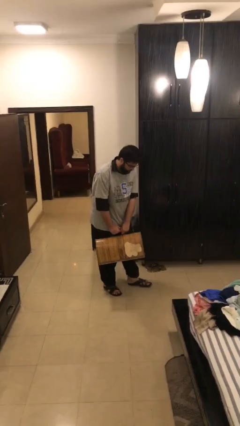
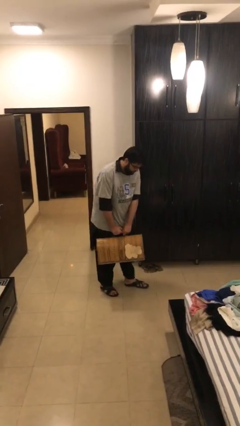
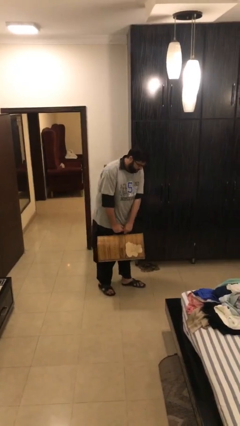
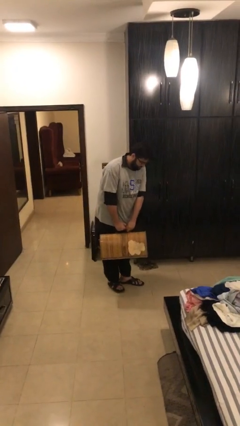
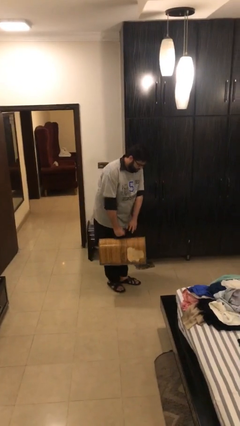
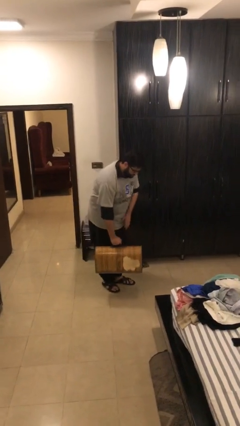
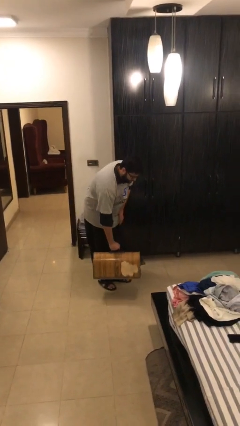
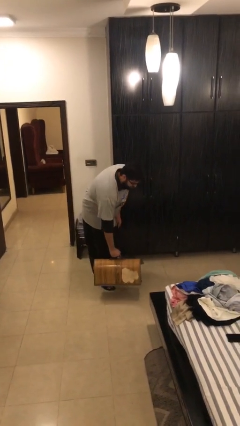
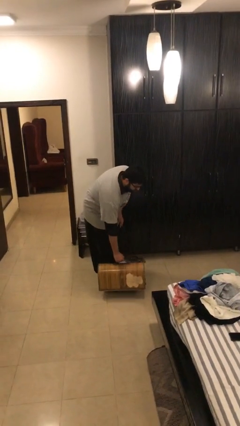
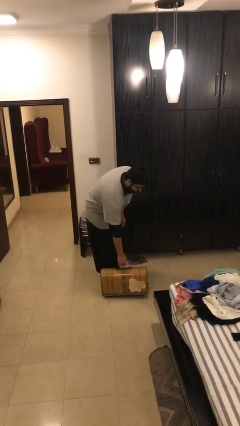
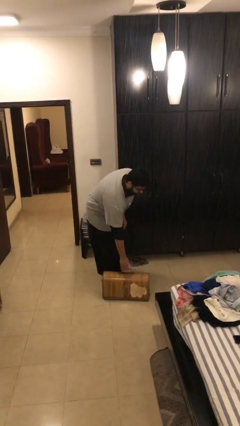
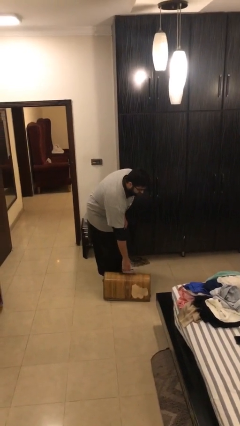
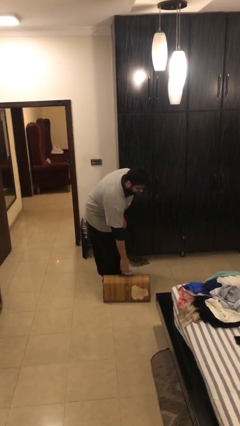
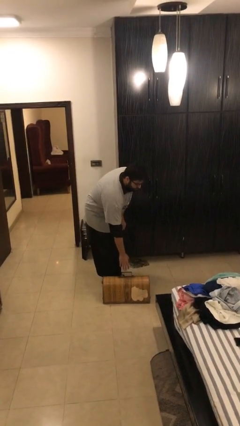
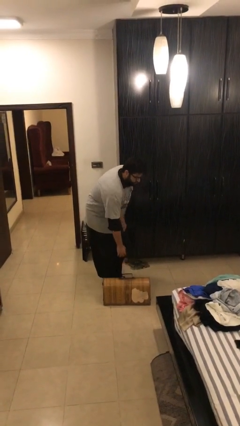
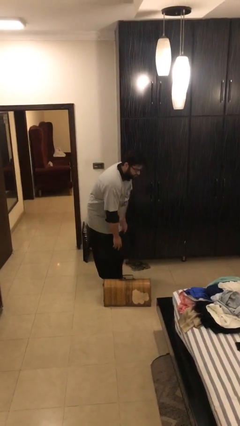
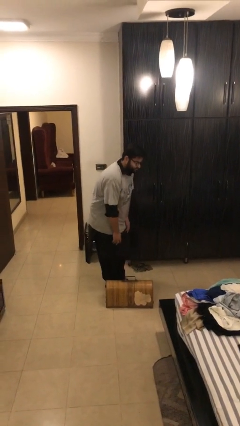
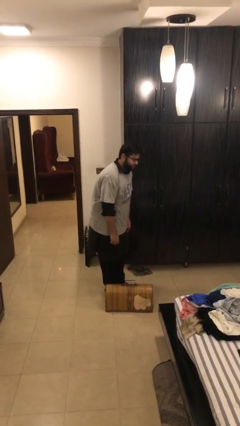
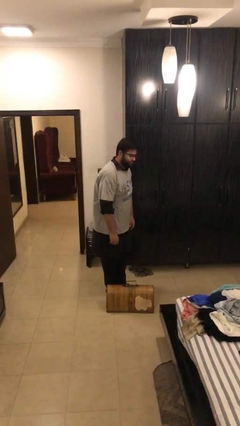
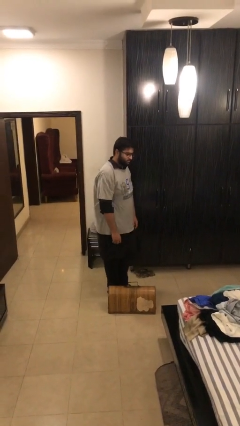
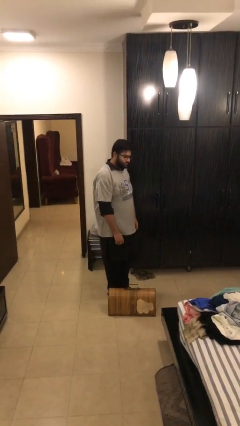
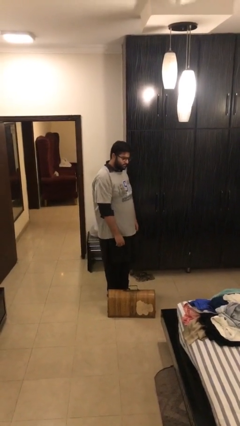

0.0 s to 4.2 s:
person puts down object on floor

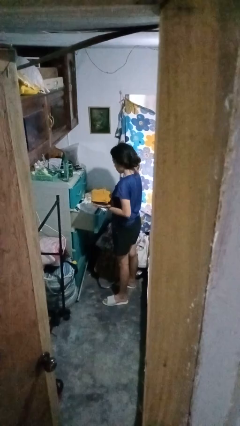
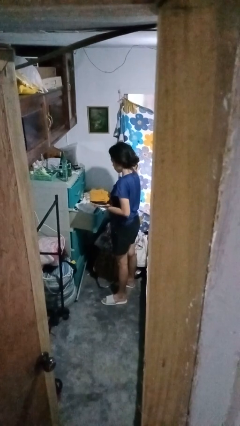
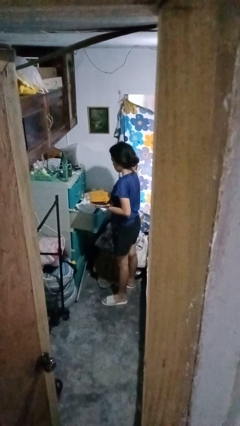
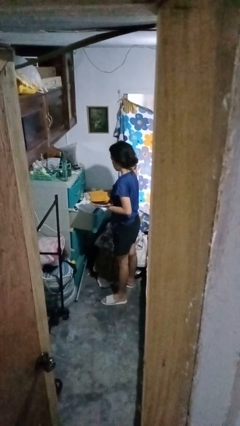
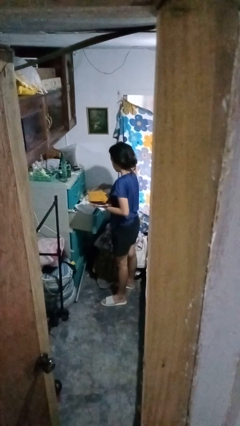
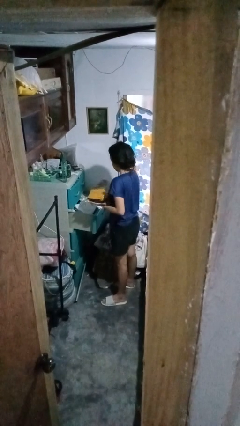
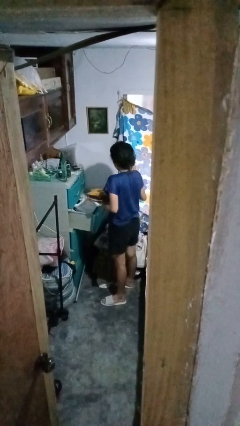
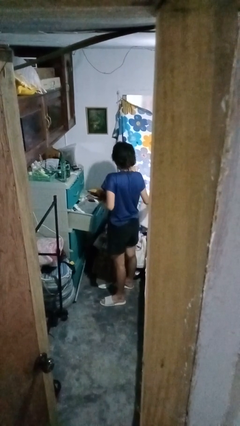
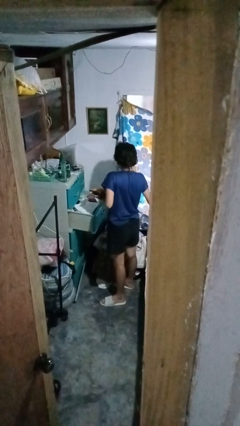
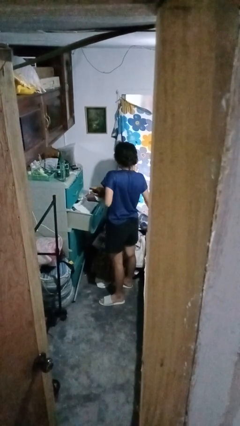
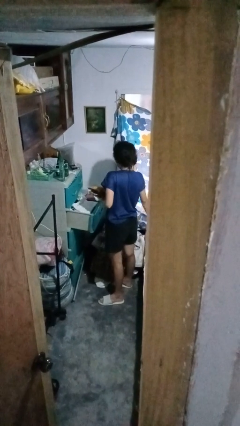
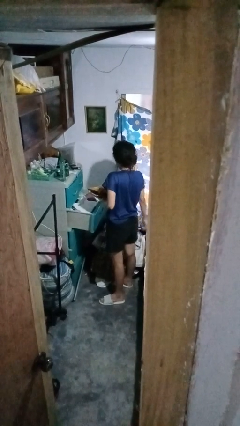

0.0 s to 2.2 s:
person takes clothes from dresser

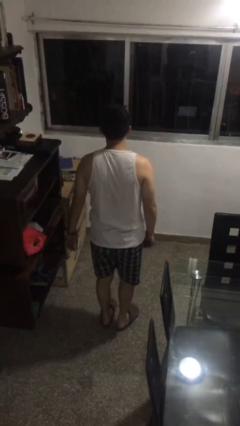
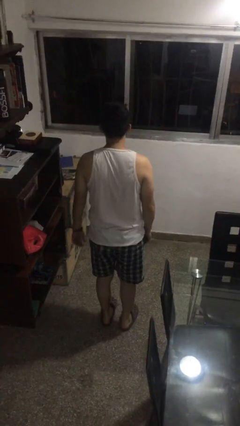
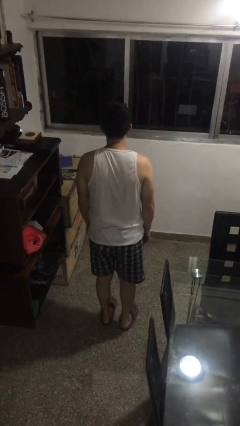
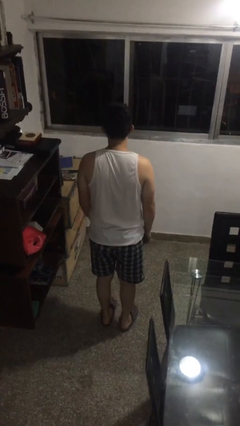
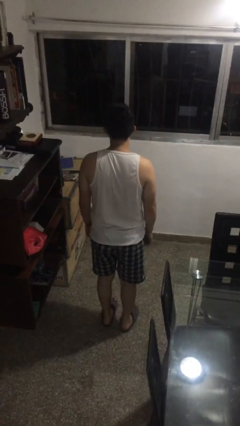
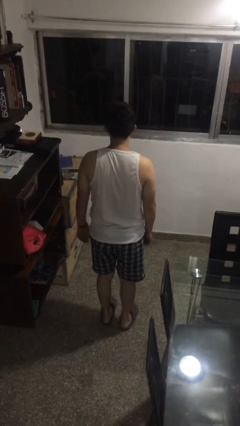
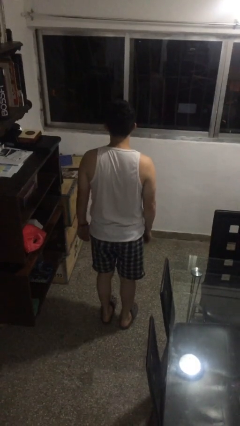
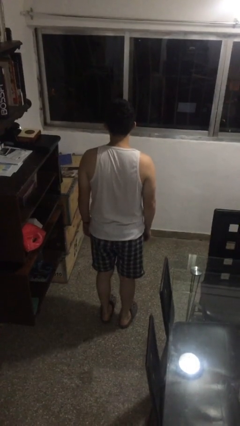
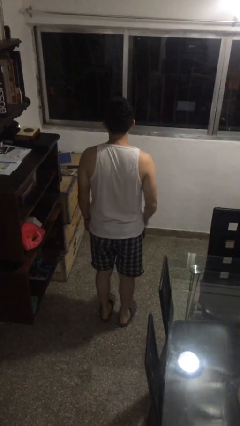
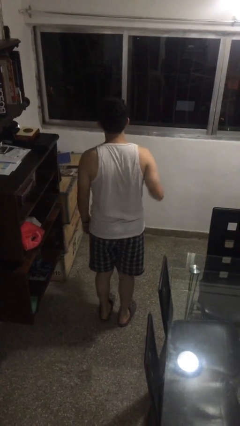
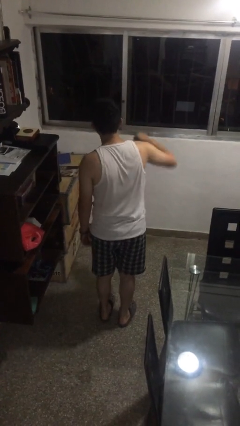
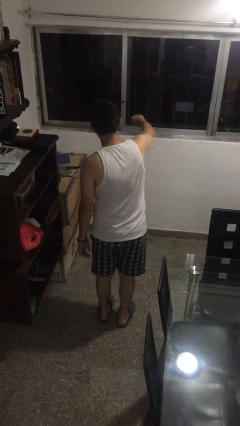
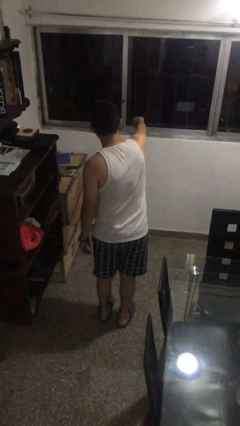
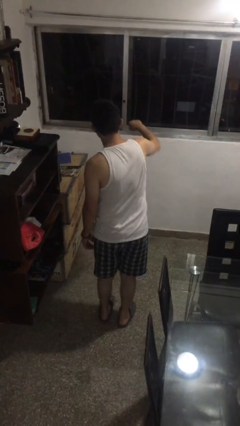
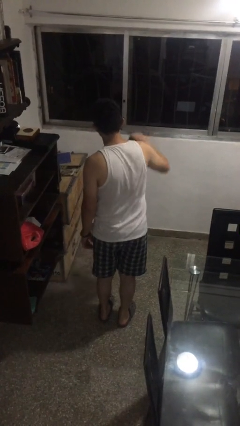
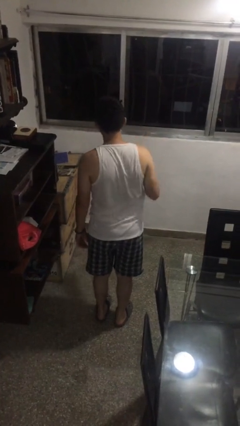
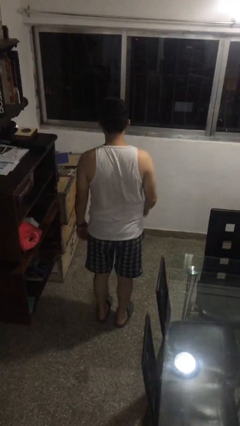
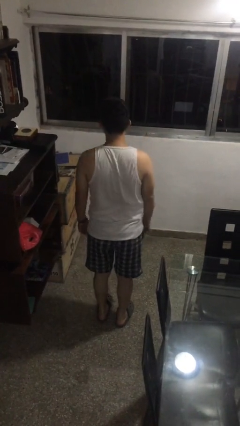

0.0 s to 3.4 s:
person karate chop

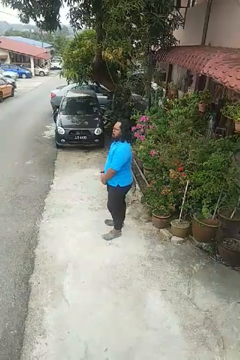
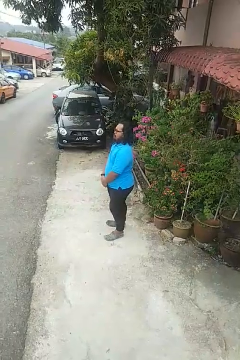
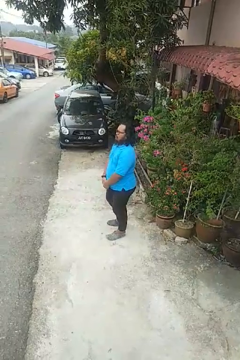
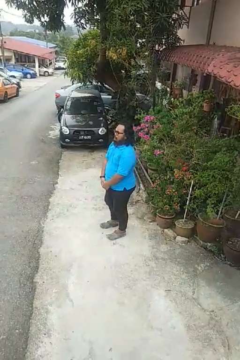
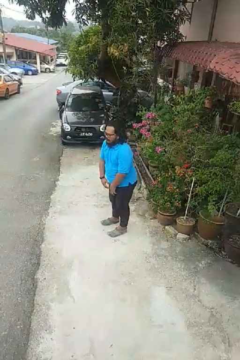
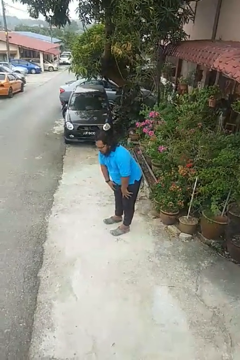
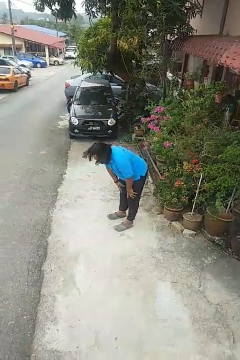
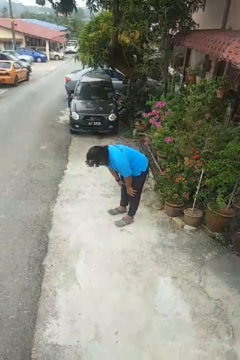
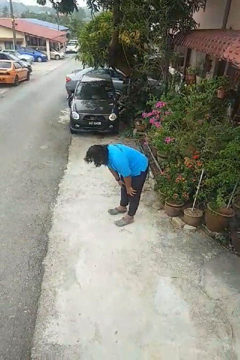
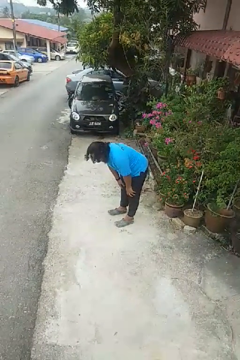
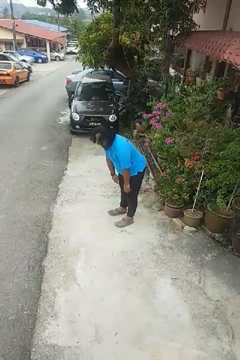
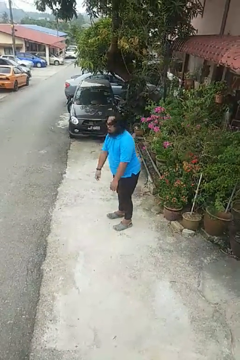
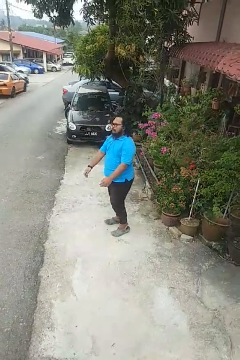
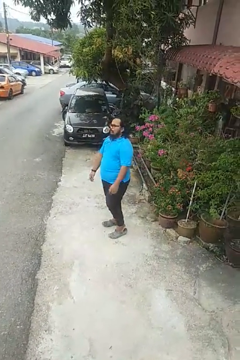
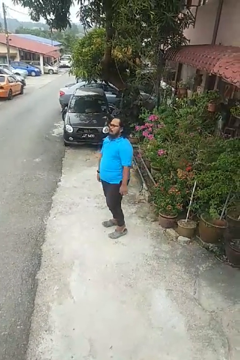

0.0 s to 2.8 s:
person bows

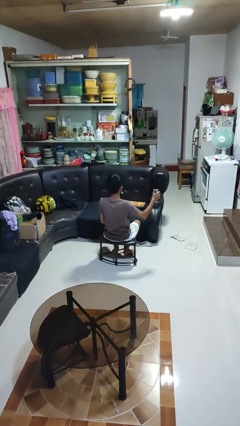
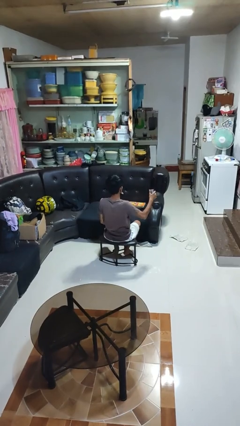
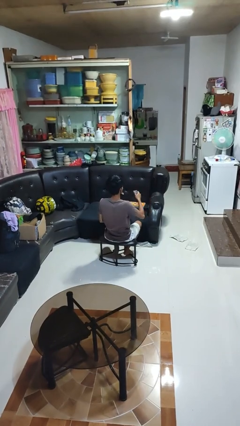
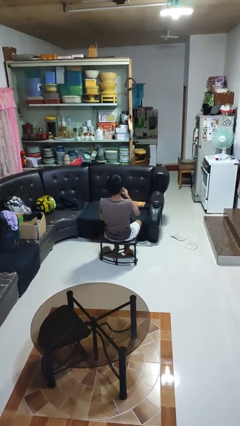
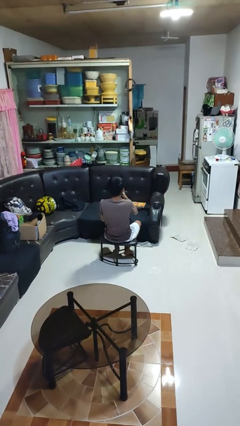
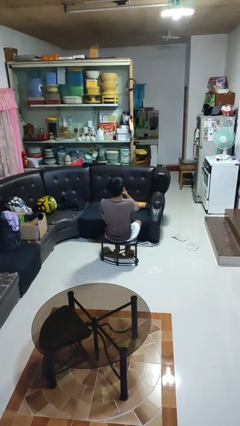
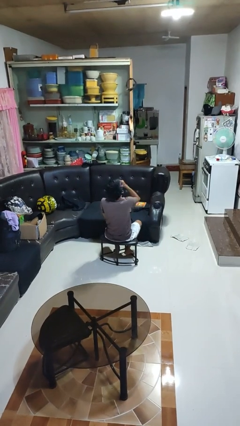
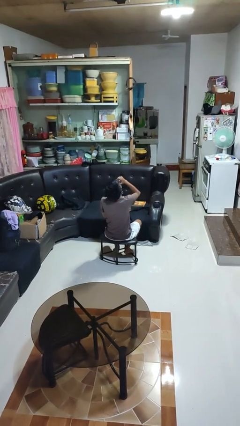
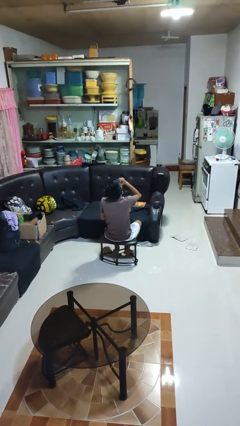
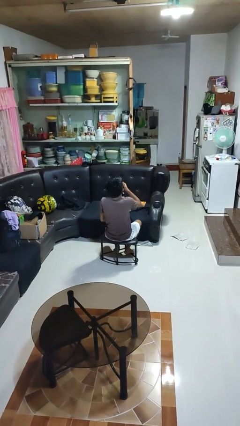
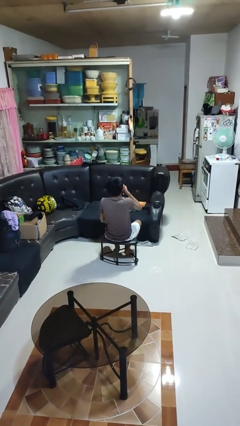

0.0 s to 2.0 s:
person drinks from beverage can

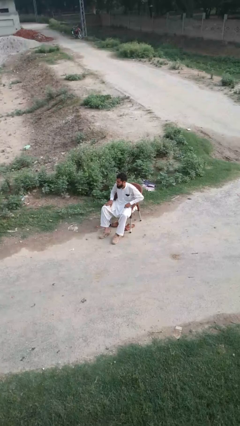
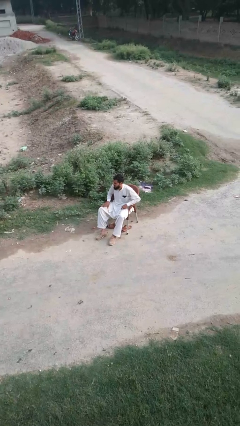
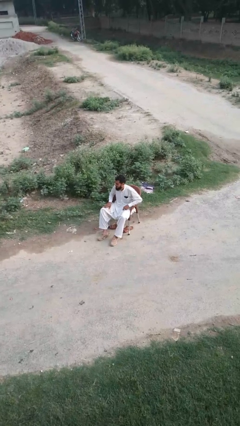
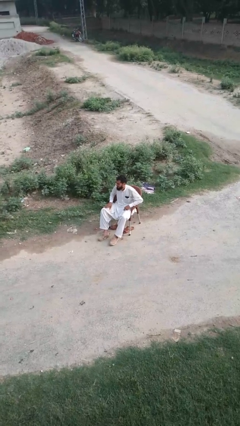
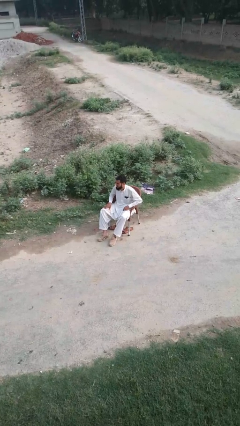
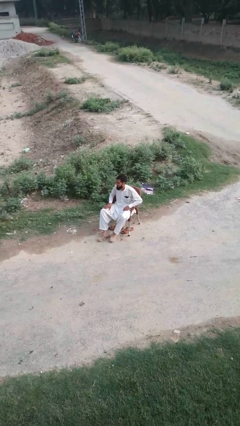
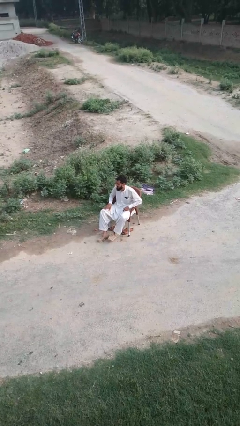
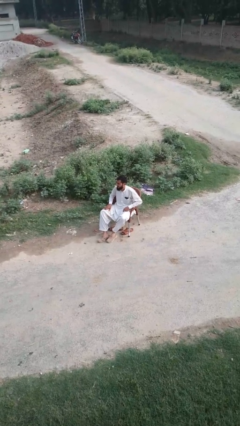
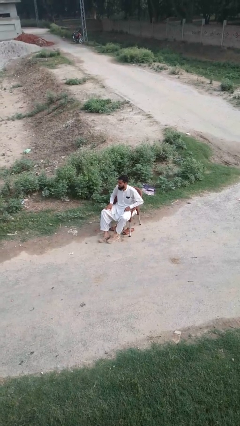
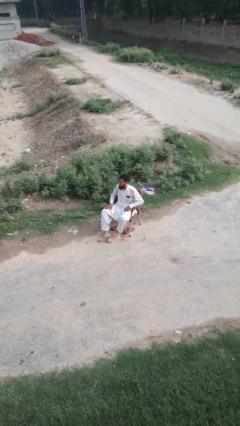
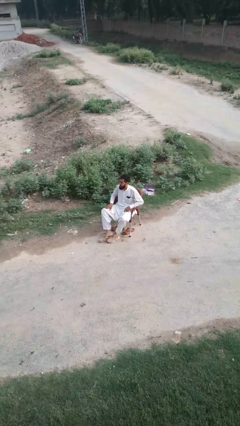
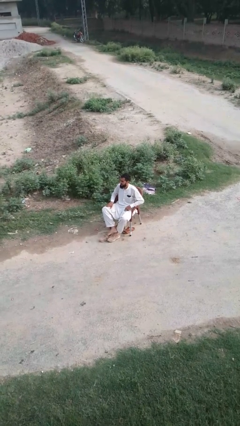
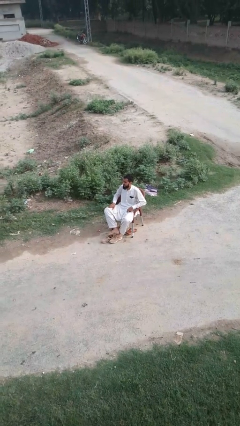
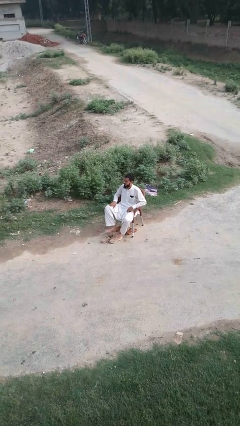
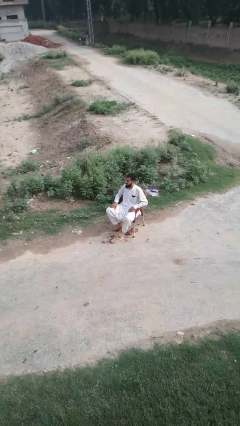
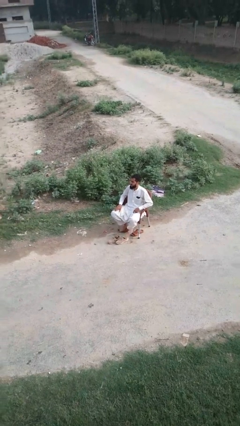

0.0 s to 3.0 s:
person takes off shoes
